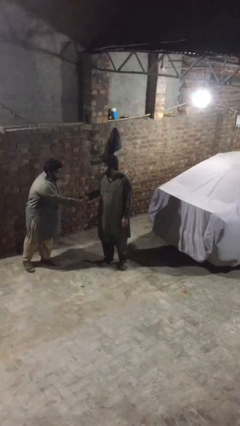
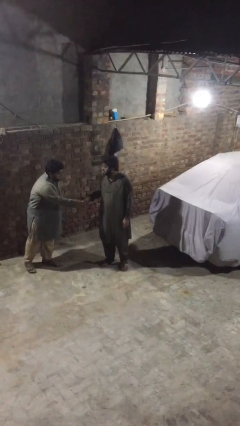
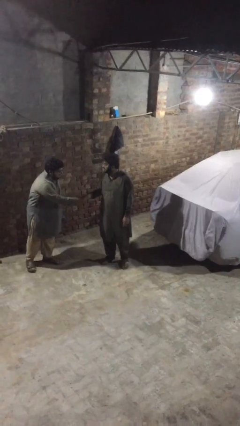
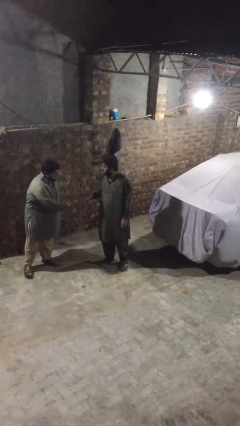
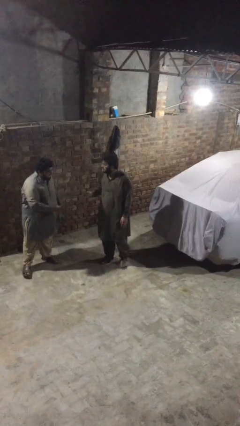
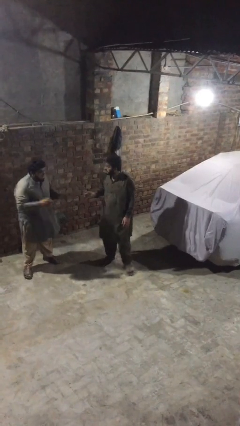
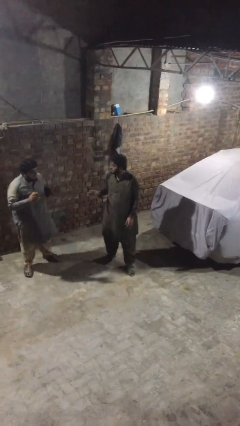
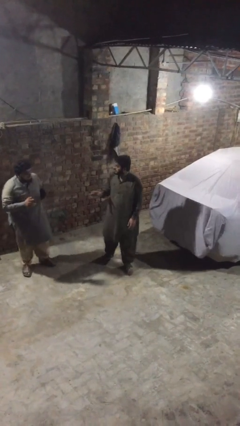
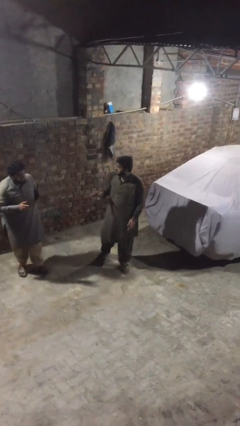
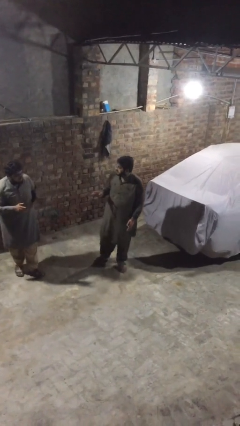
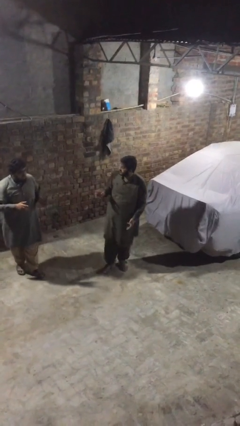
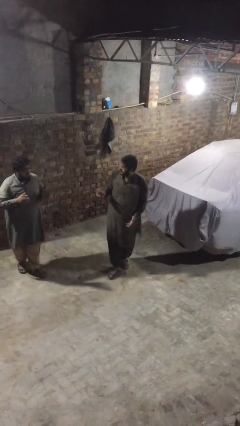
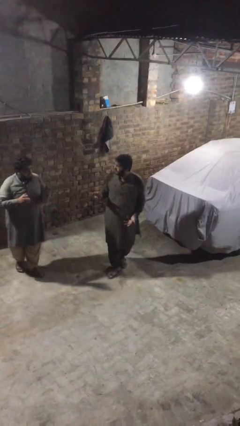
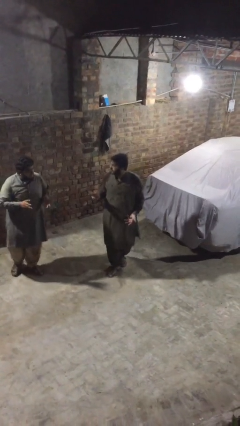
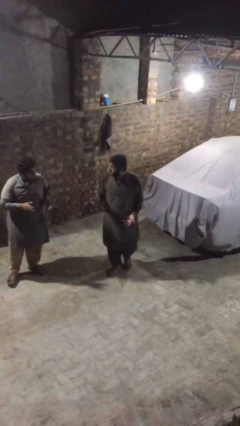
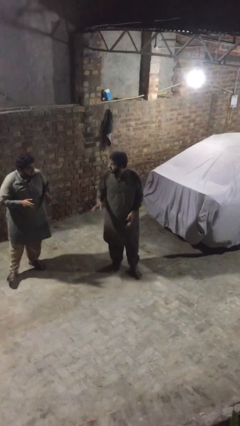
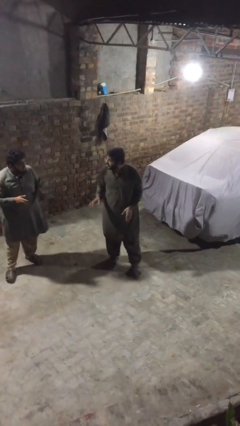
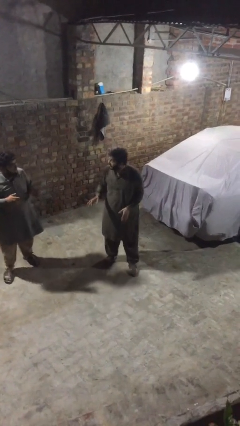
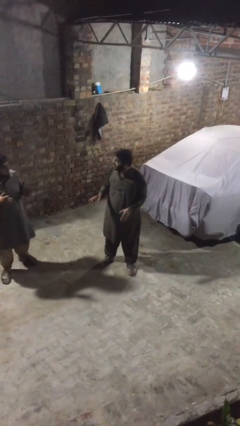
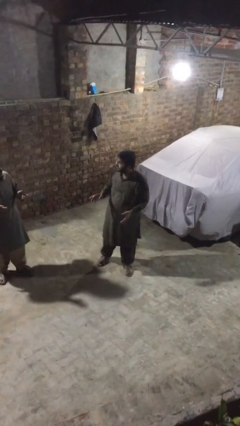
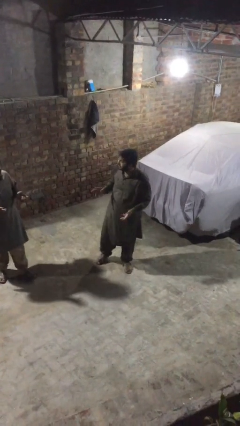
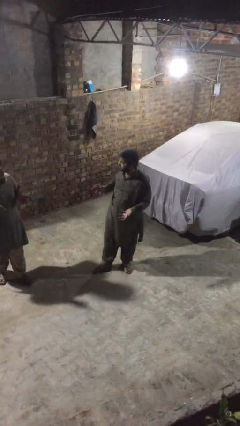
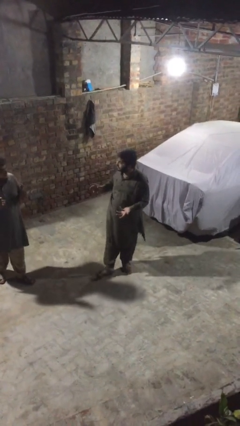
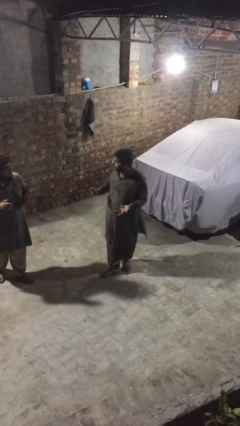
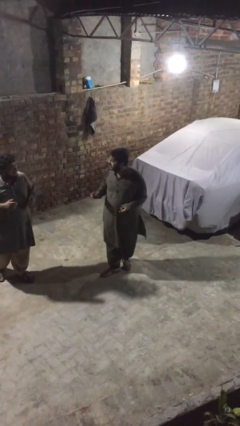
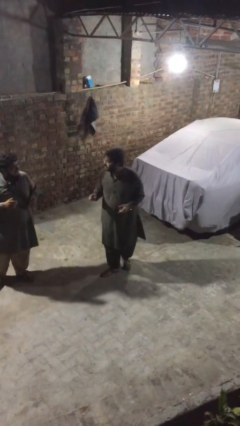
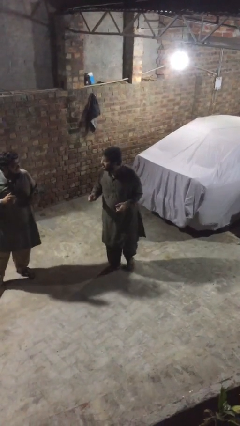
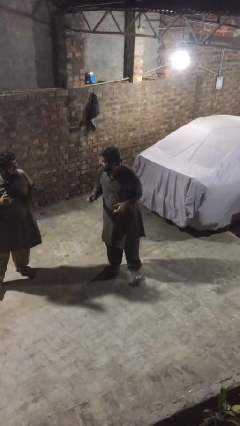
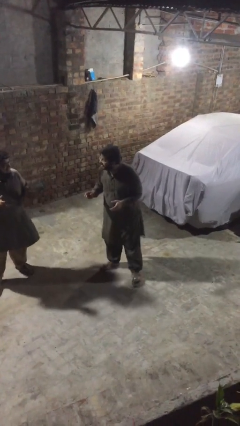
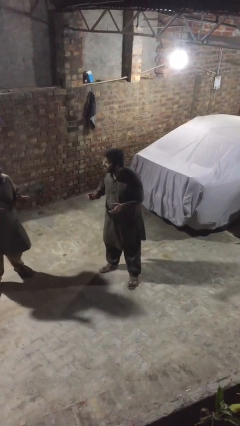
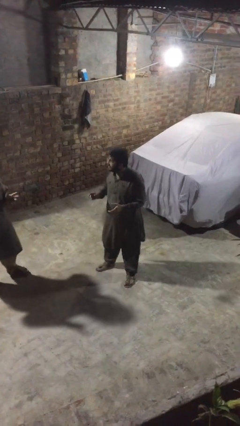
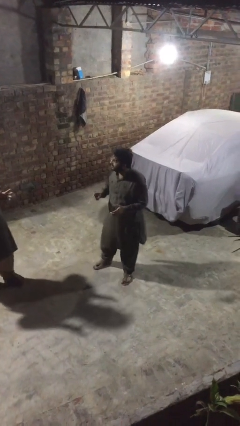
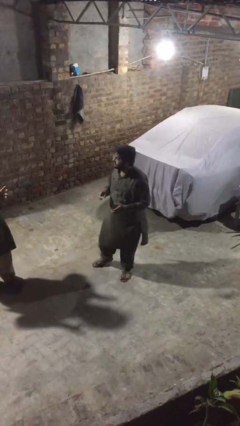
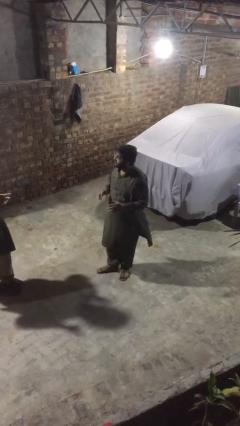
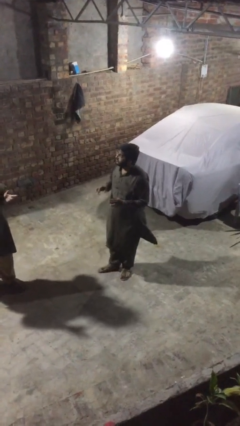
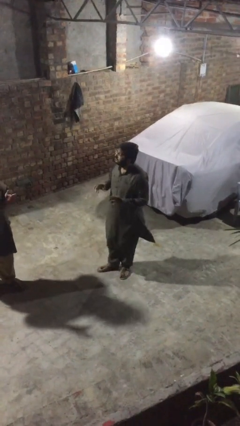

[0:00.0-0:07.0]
person talks to person

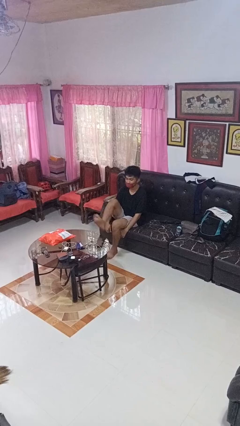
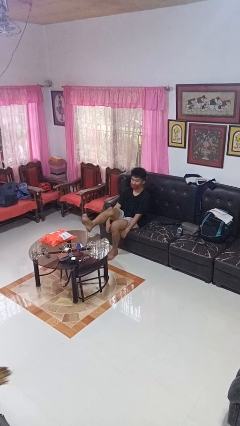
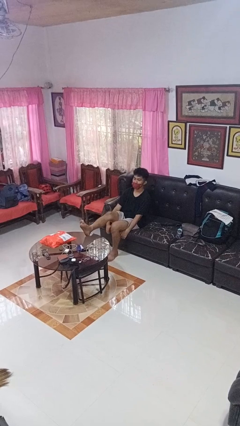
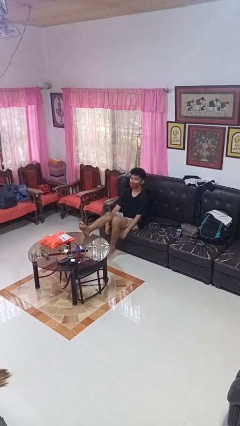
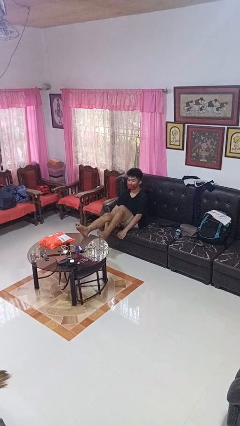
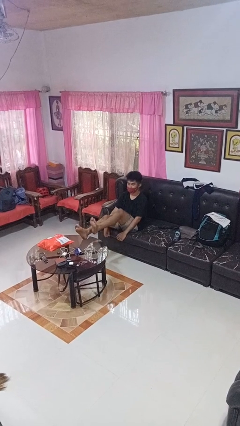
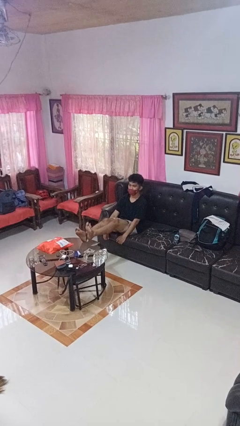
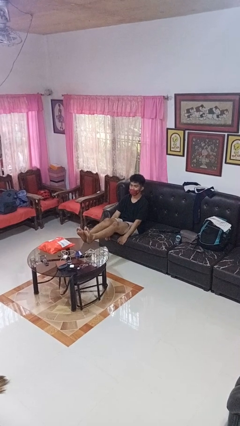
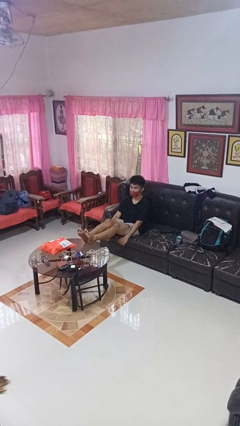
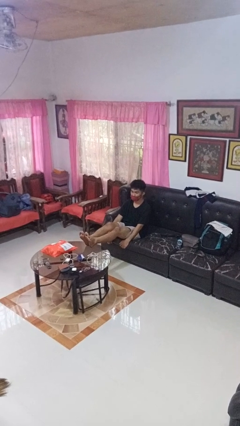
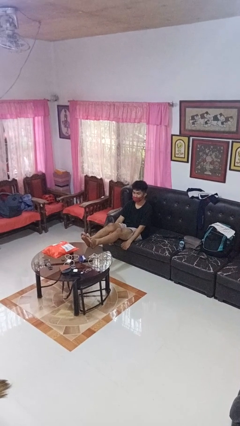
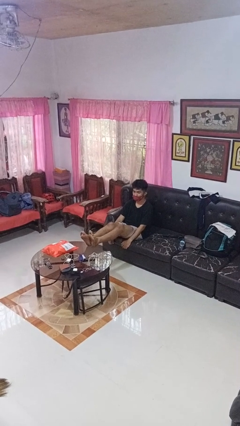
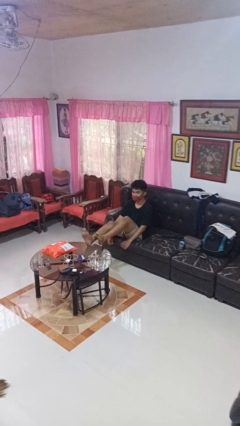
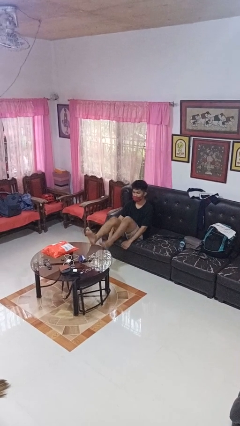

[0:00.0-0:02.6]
person puts feet up

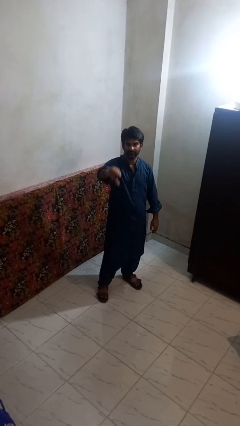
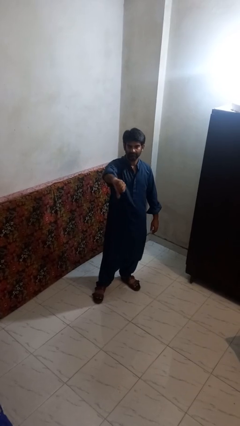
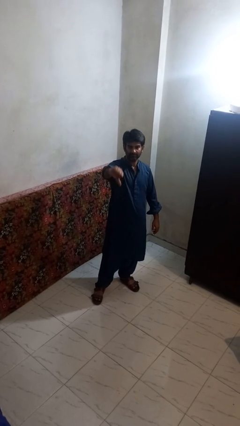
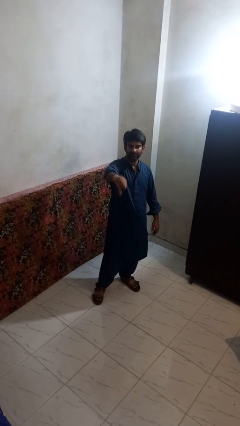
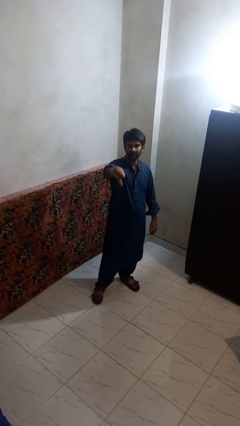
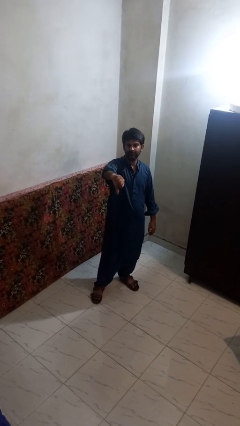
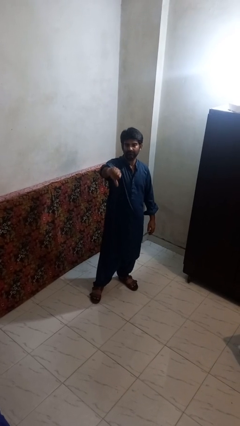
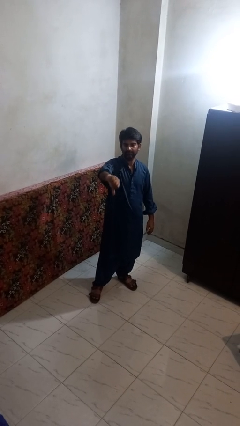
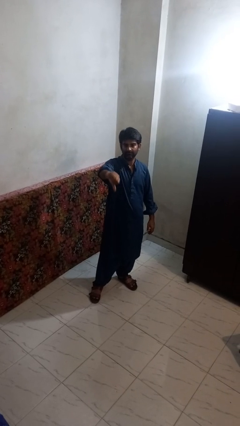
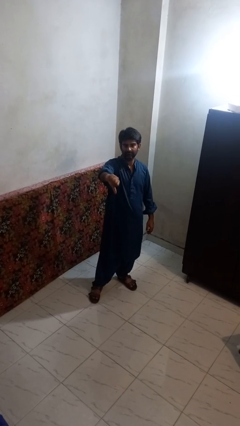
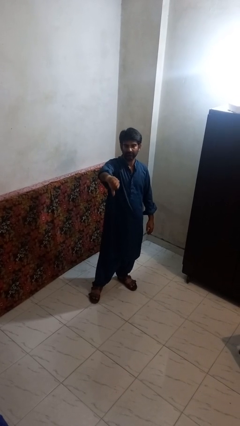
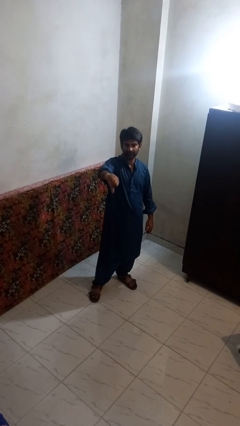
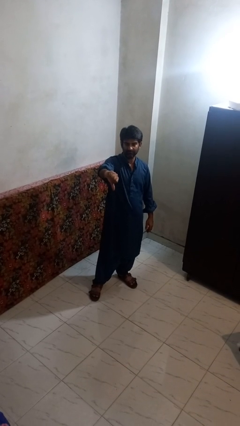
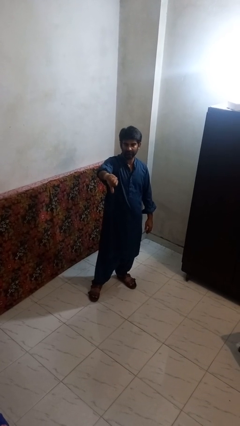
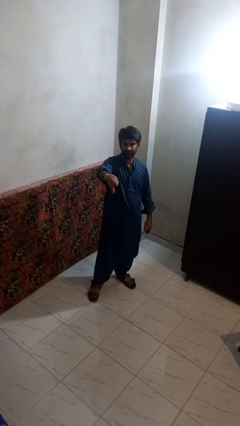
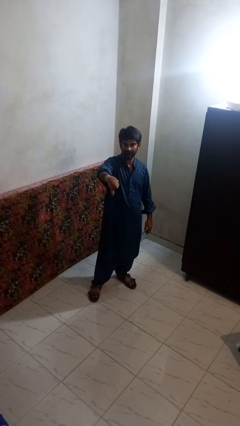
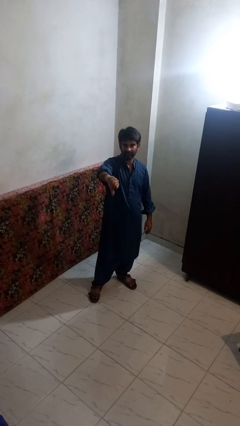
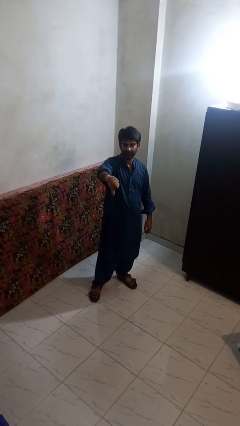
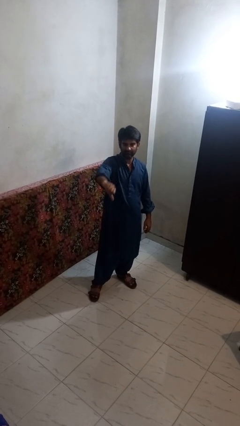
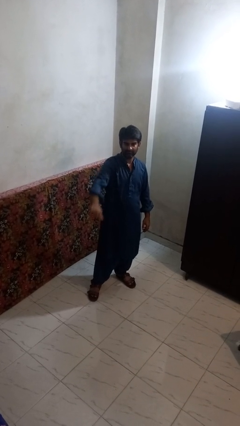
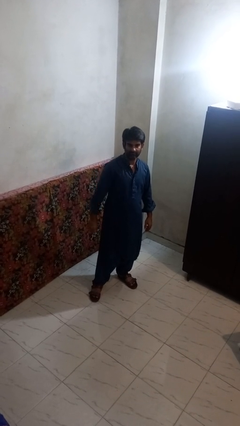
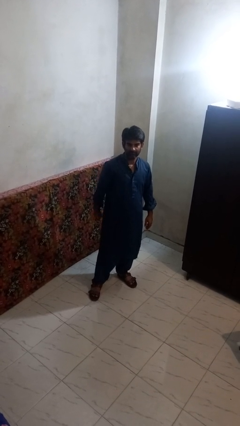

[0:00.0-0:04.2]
person gestures thumbs down

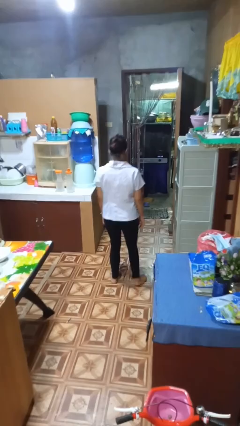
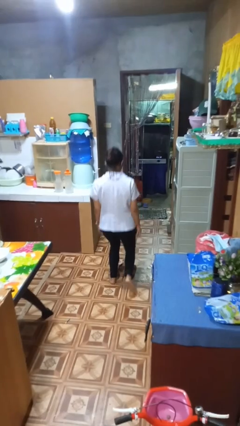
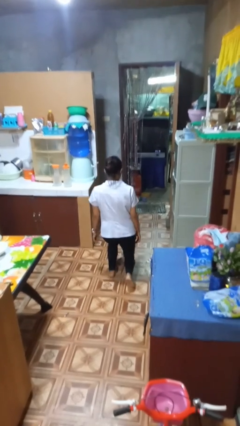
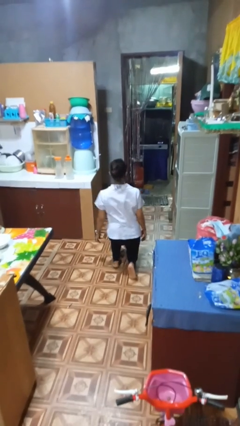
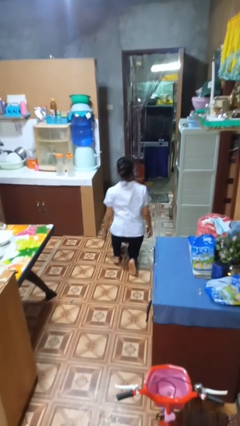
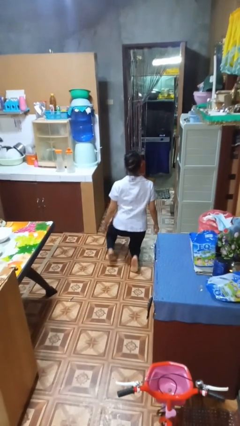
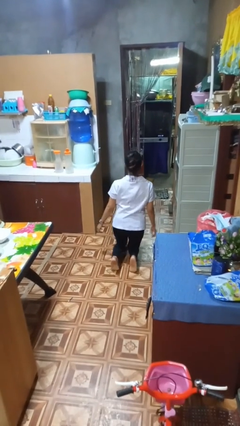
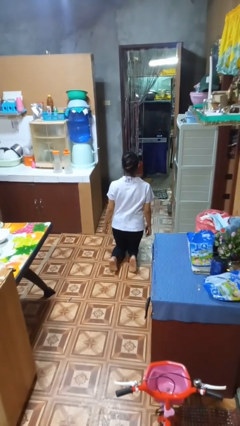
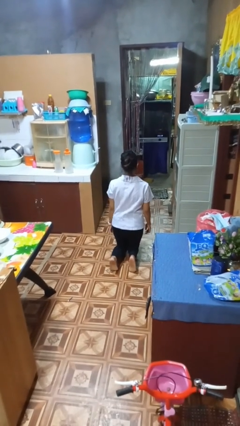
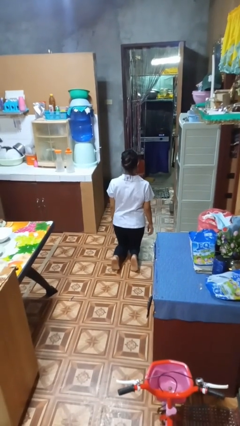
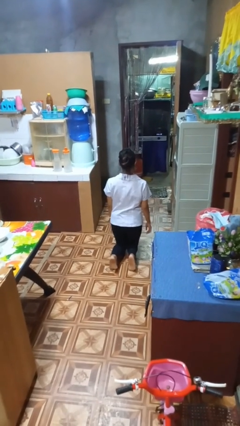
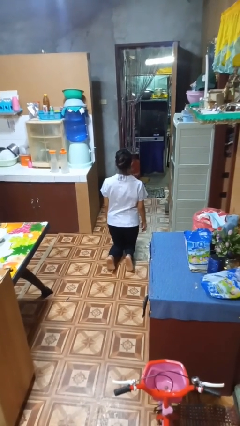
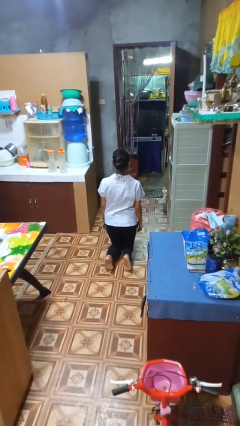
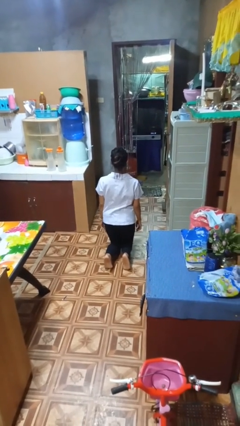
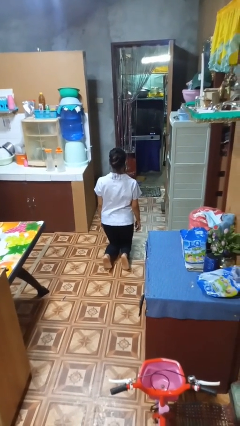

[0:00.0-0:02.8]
person kneels

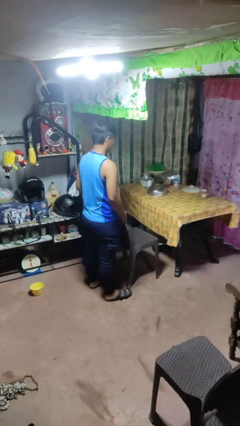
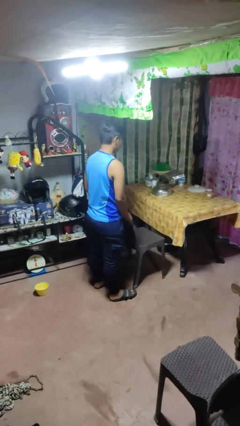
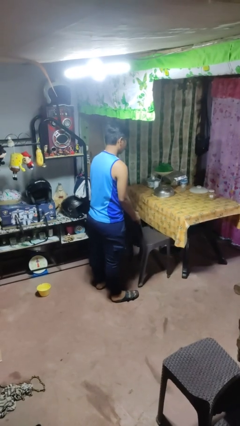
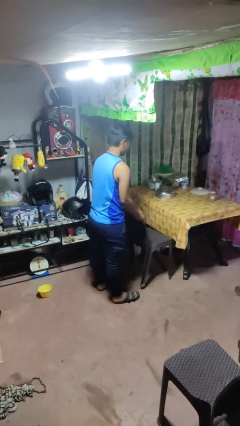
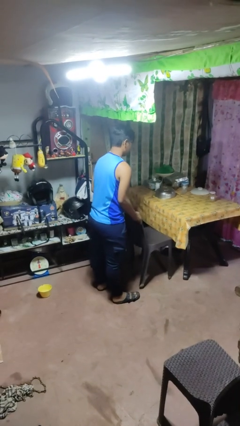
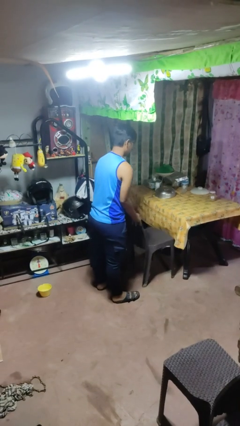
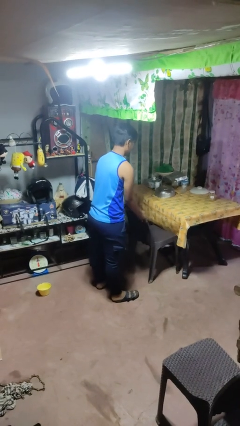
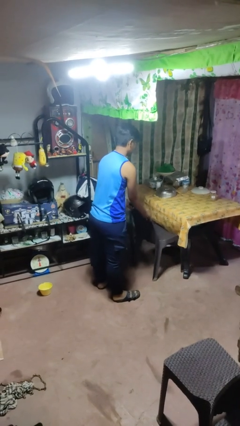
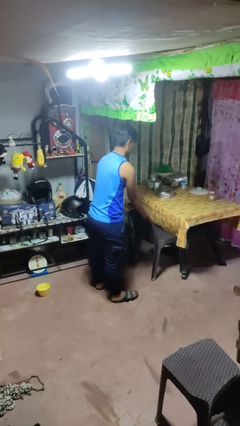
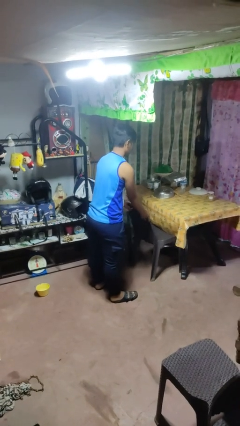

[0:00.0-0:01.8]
person pushes in chair
